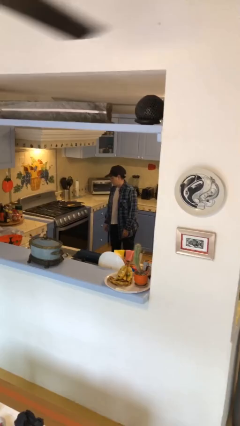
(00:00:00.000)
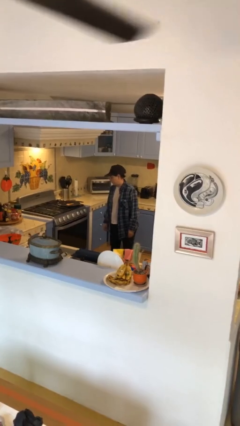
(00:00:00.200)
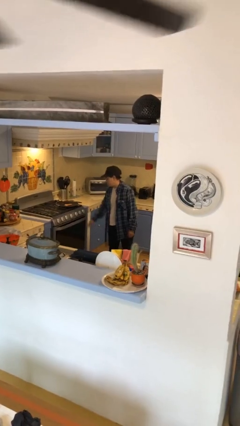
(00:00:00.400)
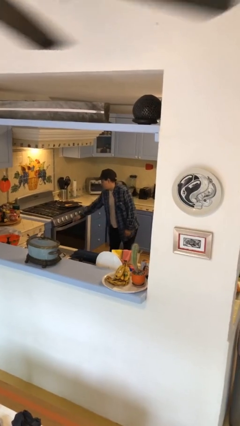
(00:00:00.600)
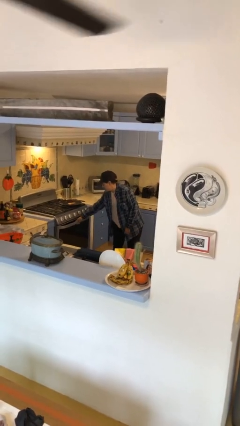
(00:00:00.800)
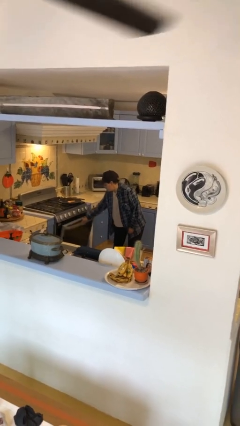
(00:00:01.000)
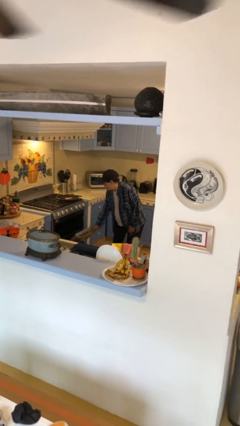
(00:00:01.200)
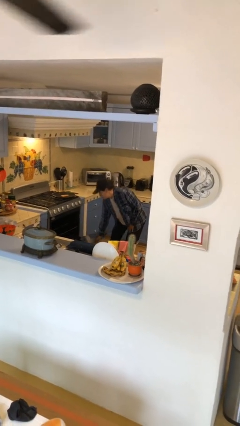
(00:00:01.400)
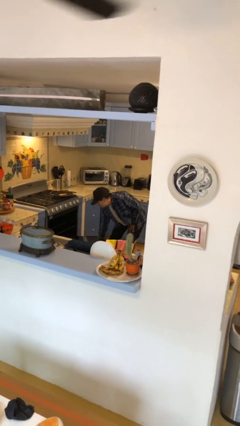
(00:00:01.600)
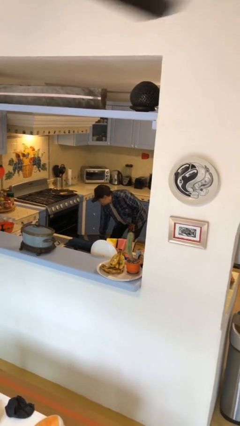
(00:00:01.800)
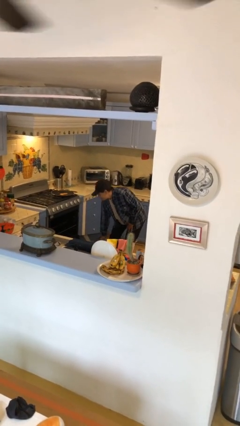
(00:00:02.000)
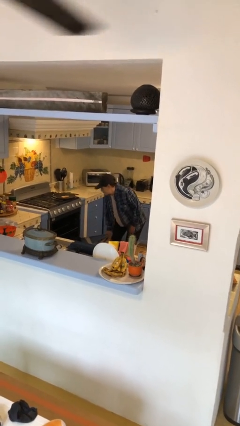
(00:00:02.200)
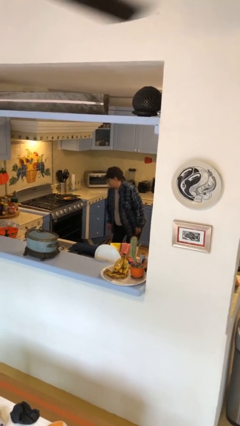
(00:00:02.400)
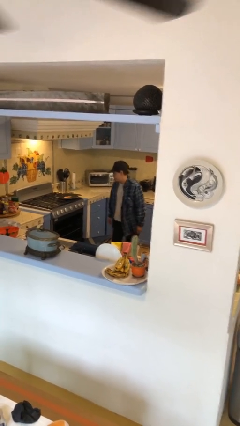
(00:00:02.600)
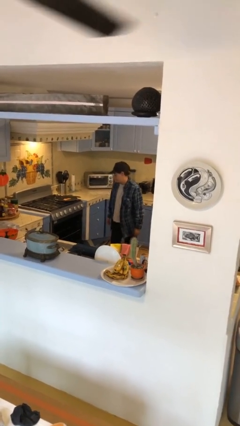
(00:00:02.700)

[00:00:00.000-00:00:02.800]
person puts object into toaster

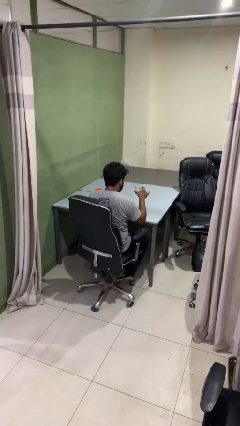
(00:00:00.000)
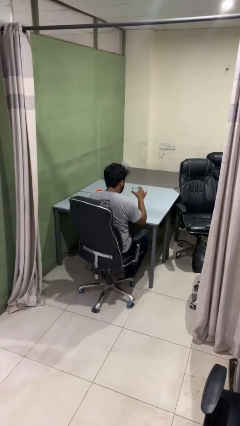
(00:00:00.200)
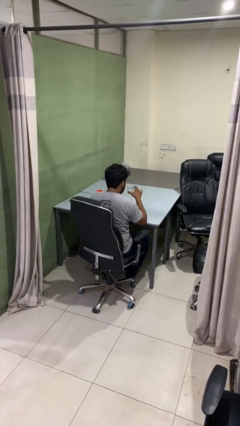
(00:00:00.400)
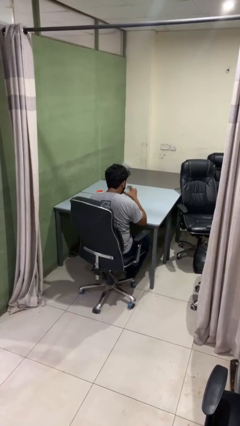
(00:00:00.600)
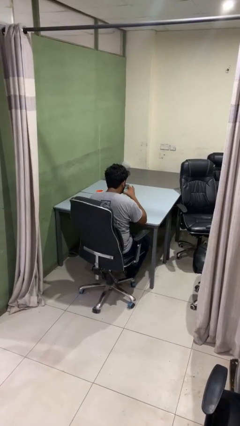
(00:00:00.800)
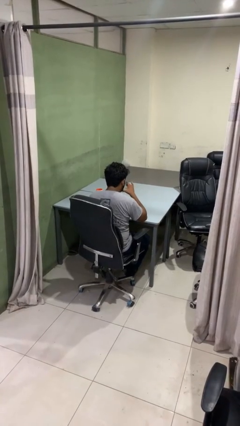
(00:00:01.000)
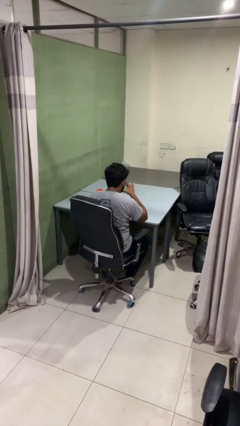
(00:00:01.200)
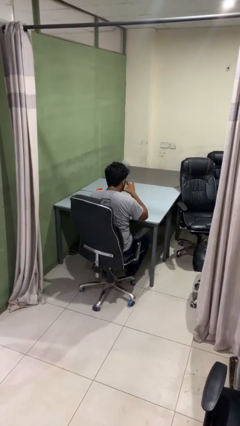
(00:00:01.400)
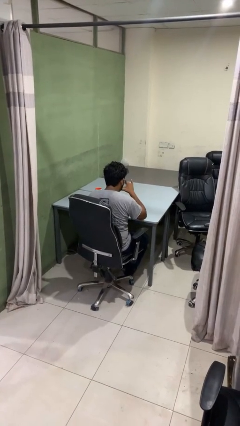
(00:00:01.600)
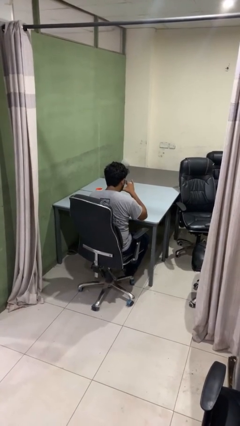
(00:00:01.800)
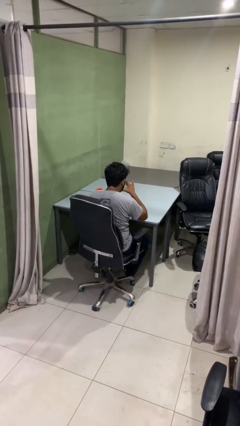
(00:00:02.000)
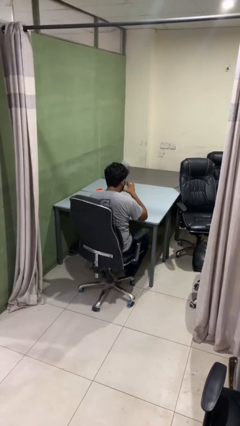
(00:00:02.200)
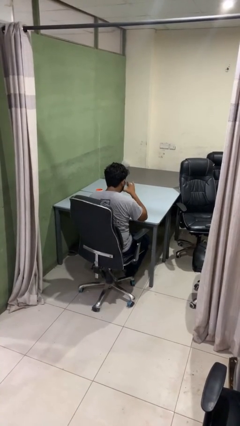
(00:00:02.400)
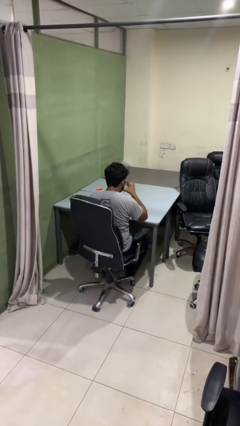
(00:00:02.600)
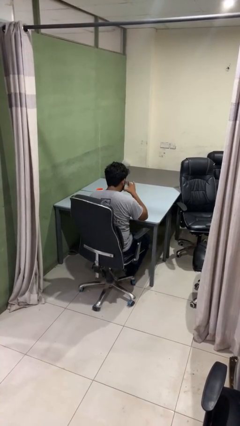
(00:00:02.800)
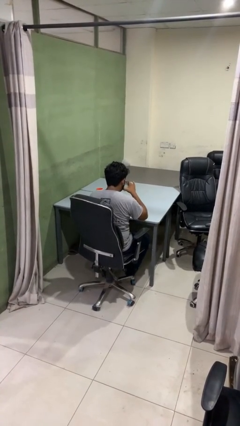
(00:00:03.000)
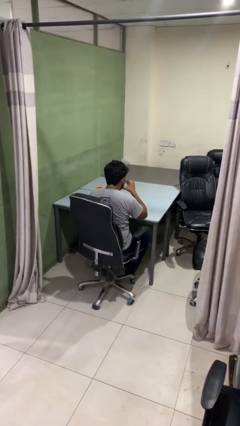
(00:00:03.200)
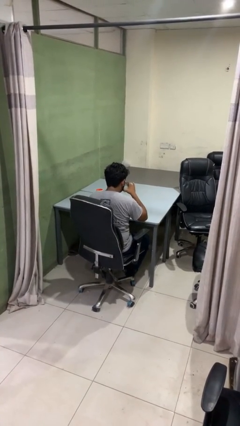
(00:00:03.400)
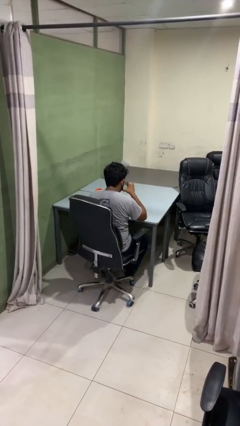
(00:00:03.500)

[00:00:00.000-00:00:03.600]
person drinks from shotglass

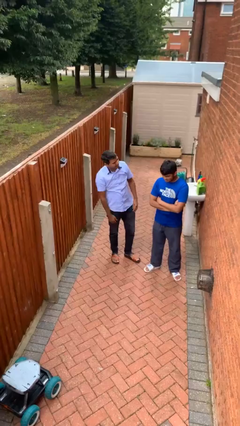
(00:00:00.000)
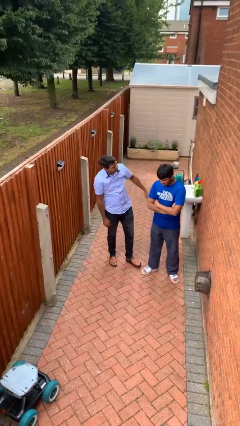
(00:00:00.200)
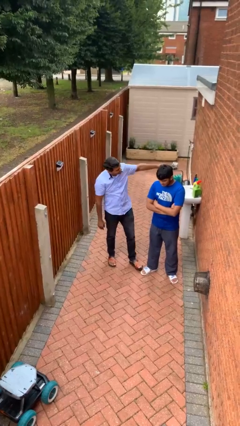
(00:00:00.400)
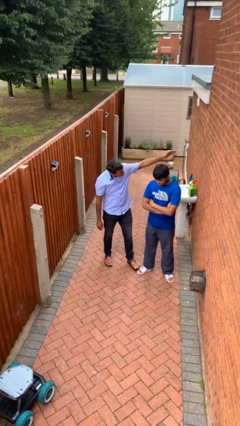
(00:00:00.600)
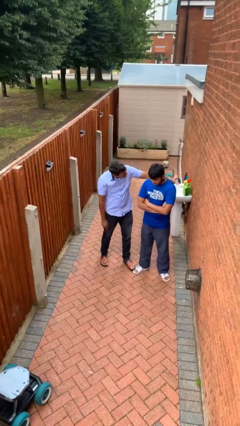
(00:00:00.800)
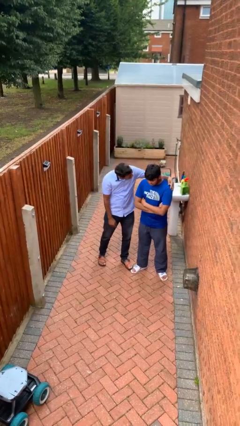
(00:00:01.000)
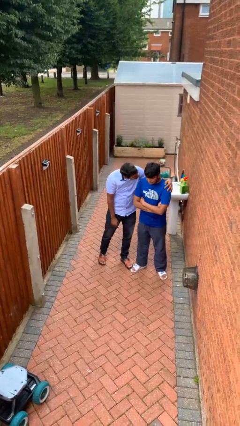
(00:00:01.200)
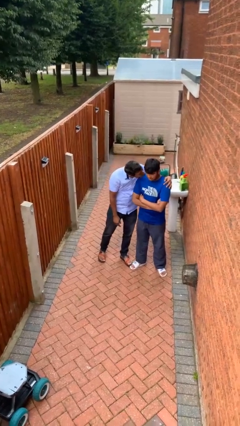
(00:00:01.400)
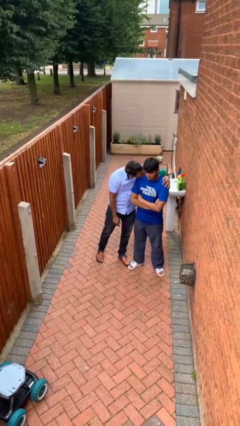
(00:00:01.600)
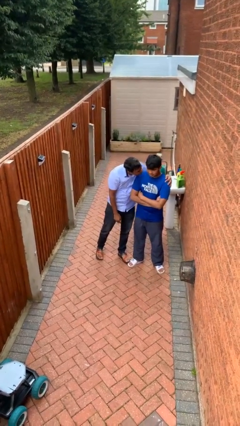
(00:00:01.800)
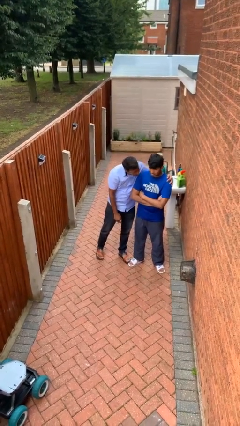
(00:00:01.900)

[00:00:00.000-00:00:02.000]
person kisses cheek of person

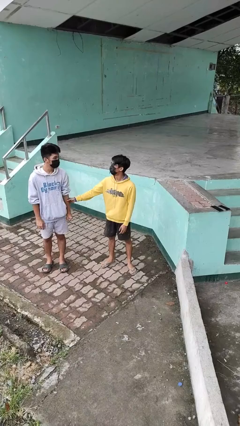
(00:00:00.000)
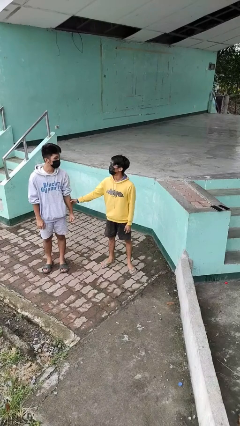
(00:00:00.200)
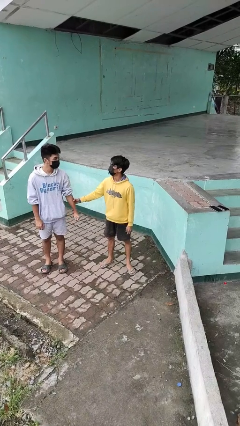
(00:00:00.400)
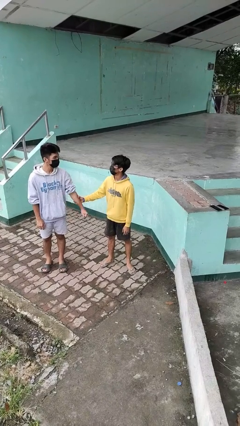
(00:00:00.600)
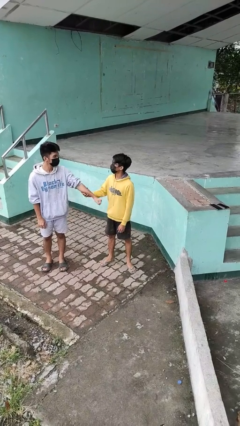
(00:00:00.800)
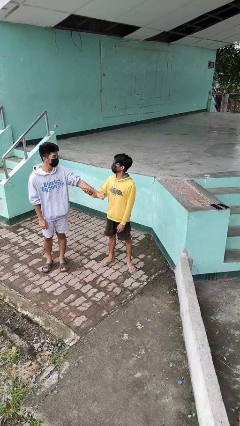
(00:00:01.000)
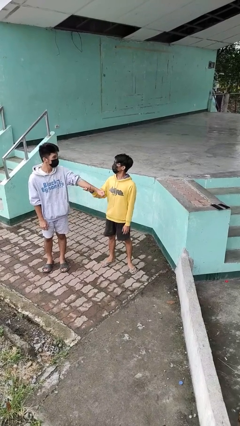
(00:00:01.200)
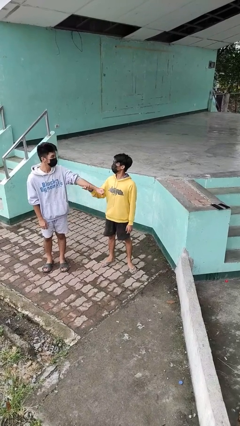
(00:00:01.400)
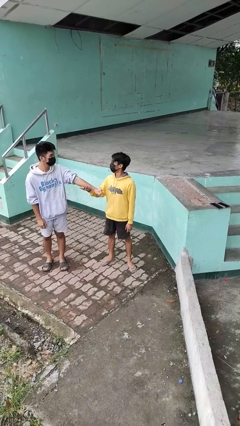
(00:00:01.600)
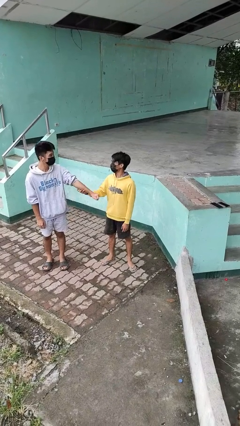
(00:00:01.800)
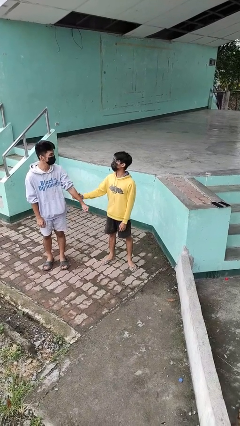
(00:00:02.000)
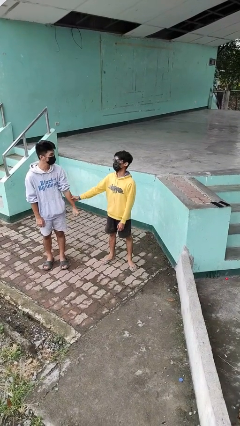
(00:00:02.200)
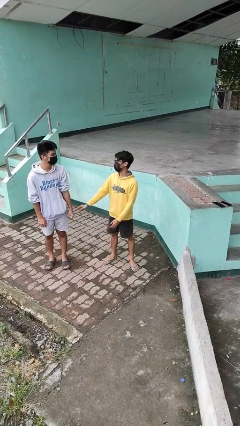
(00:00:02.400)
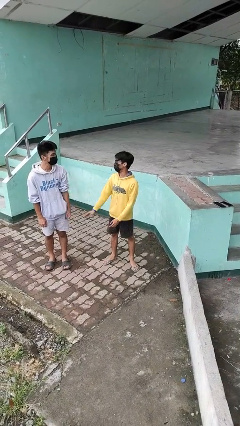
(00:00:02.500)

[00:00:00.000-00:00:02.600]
person grabs person by forearm

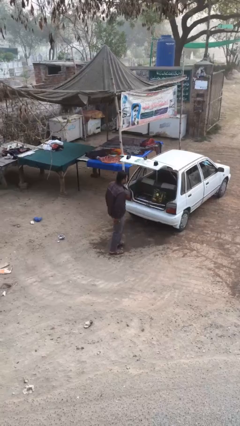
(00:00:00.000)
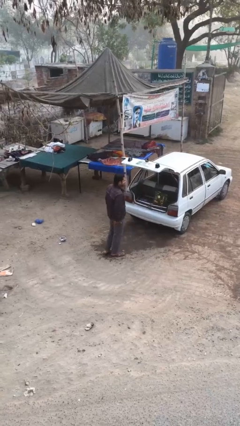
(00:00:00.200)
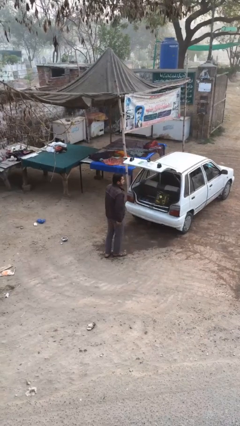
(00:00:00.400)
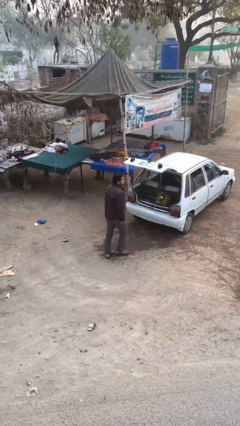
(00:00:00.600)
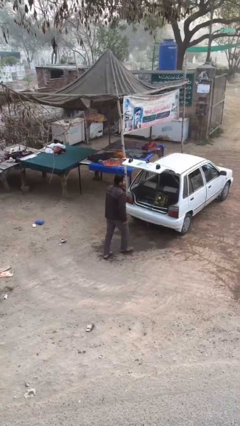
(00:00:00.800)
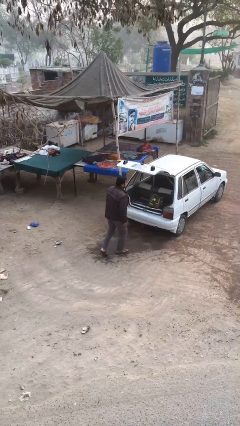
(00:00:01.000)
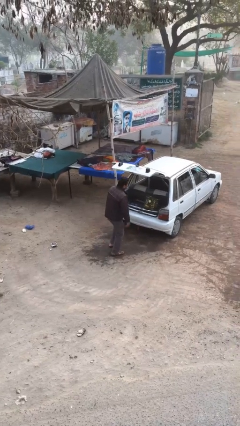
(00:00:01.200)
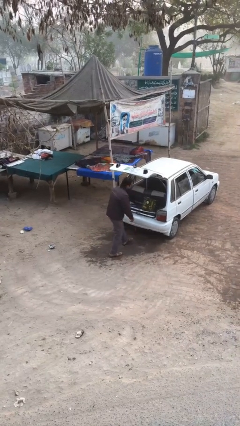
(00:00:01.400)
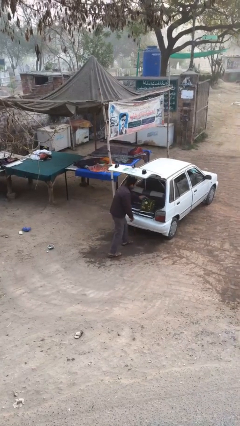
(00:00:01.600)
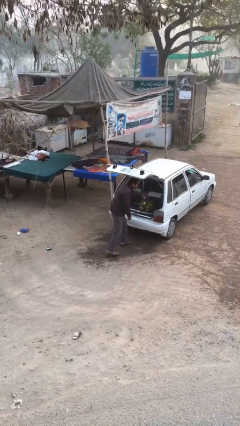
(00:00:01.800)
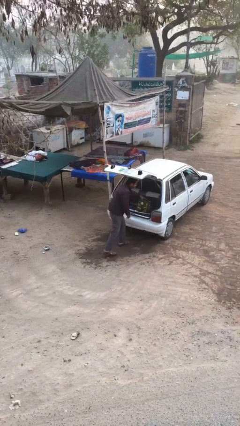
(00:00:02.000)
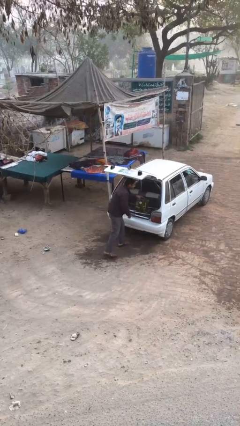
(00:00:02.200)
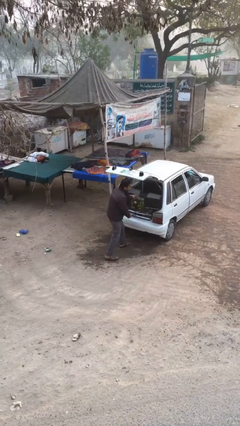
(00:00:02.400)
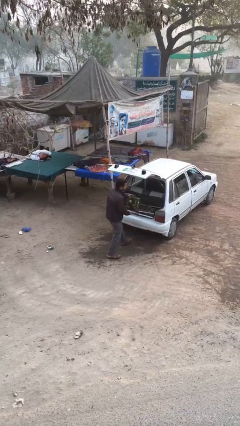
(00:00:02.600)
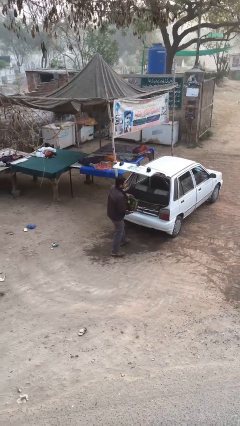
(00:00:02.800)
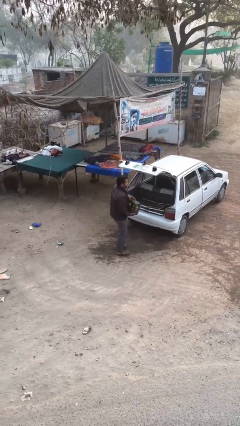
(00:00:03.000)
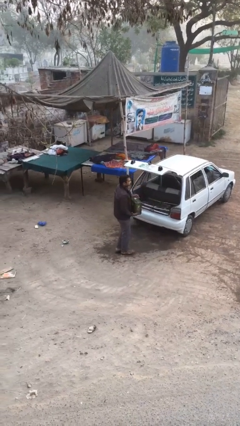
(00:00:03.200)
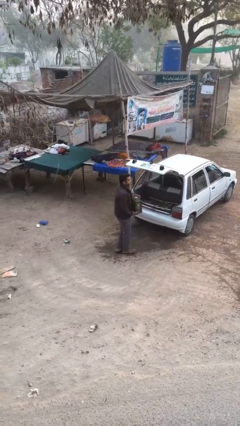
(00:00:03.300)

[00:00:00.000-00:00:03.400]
person unloads car

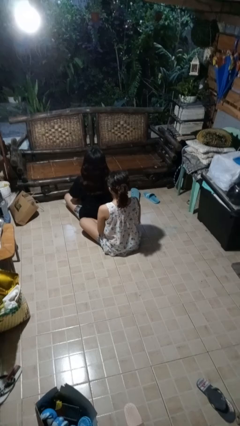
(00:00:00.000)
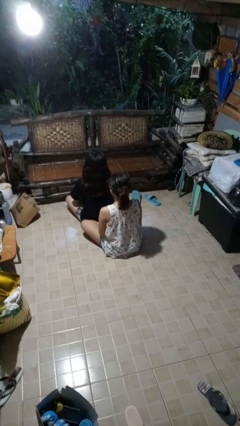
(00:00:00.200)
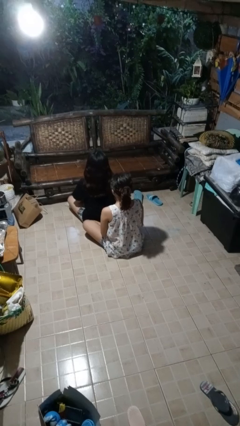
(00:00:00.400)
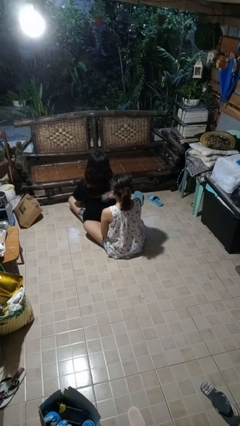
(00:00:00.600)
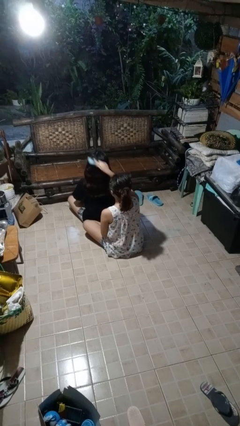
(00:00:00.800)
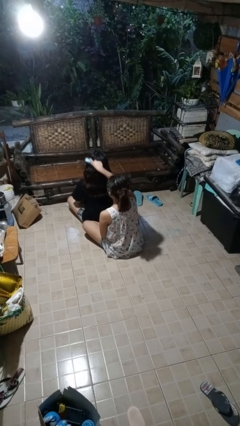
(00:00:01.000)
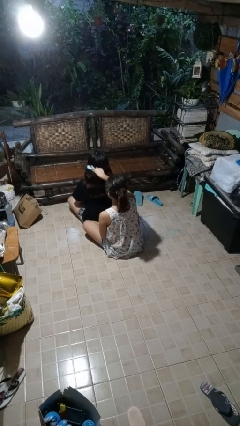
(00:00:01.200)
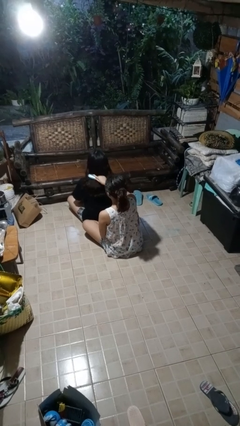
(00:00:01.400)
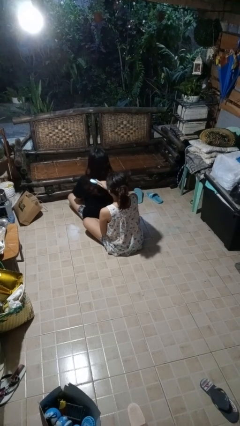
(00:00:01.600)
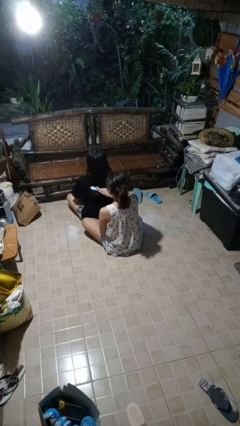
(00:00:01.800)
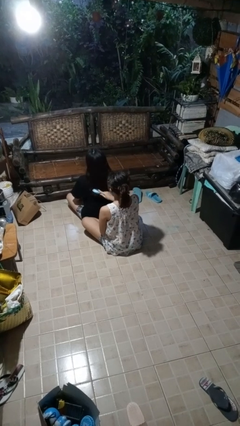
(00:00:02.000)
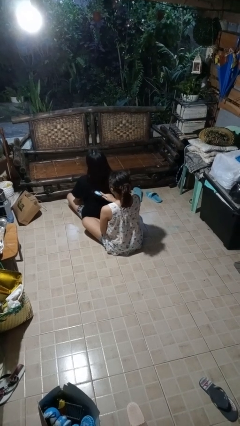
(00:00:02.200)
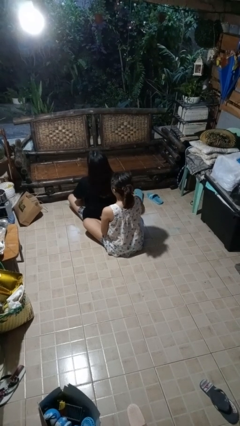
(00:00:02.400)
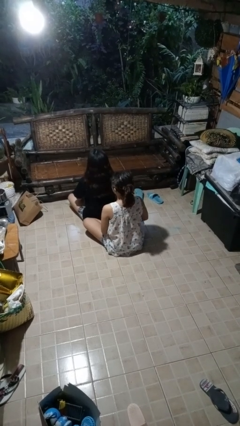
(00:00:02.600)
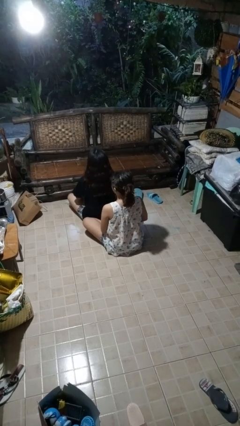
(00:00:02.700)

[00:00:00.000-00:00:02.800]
person brushes hair of person
